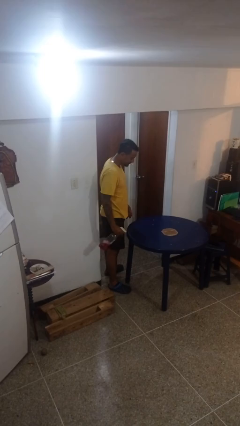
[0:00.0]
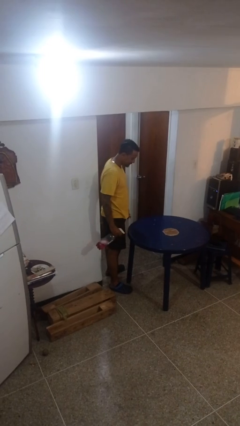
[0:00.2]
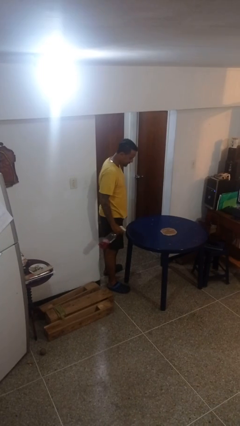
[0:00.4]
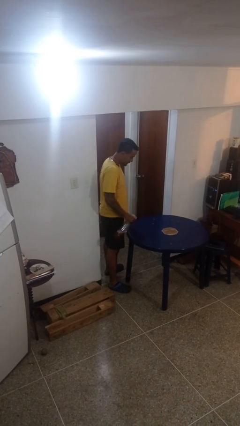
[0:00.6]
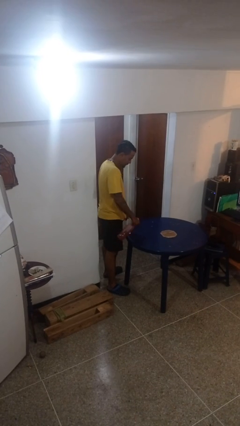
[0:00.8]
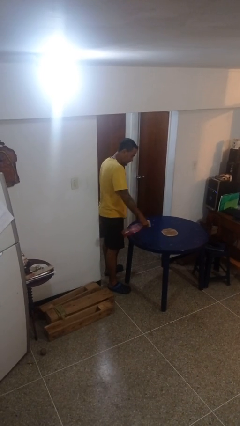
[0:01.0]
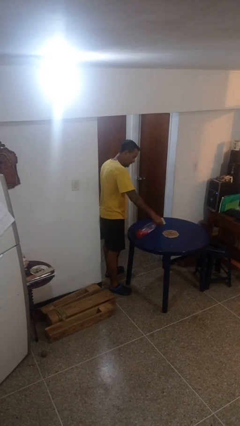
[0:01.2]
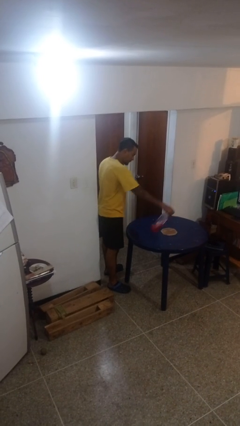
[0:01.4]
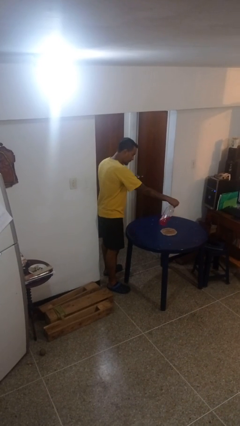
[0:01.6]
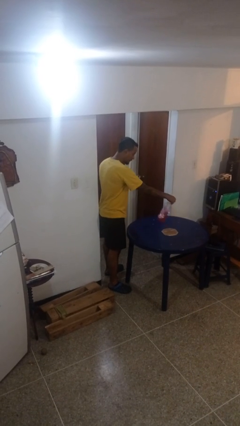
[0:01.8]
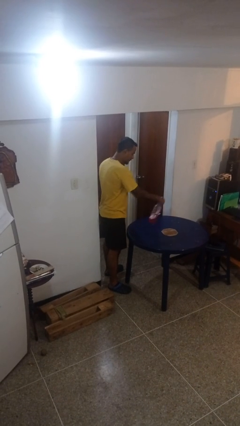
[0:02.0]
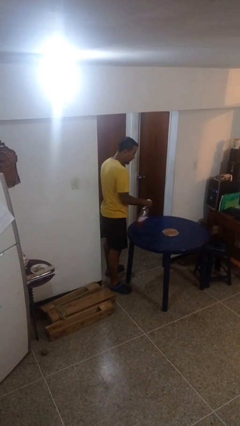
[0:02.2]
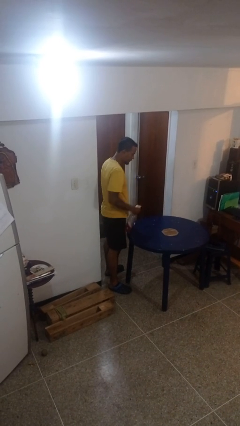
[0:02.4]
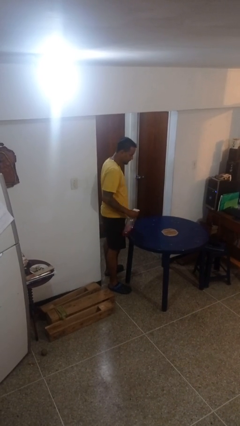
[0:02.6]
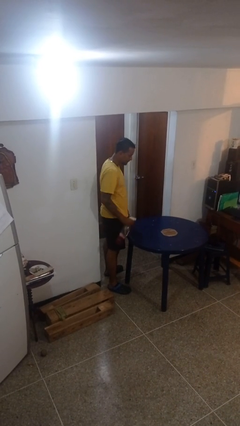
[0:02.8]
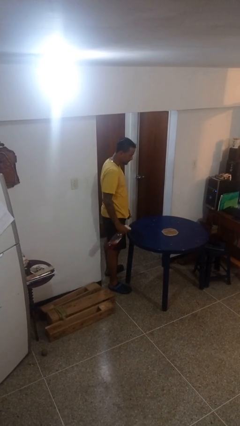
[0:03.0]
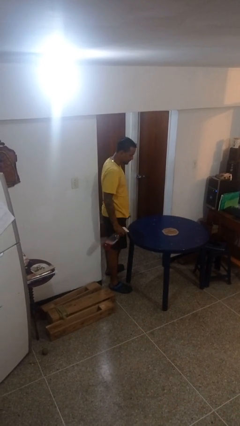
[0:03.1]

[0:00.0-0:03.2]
person sprays from bottle

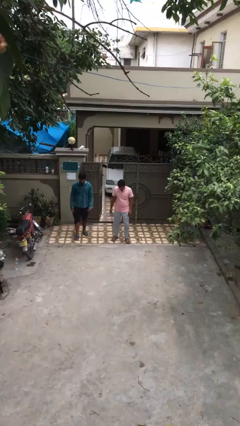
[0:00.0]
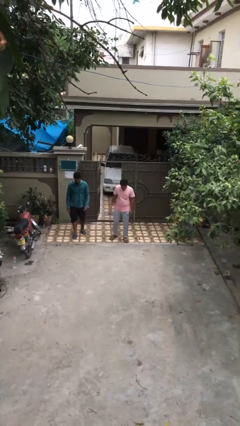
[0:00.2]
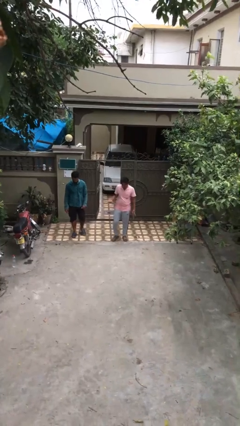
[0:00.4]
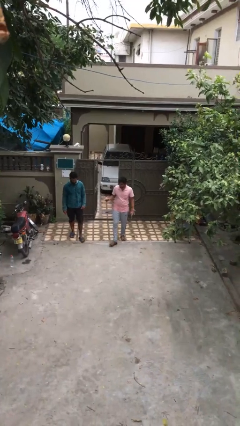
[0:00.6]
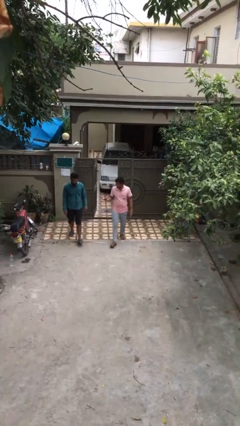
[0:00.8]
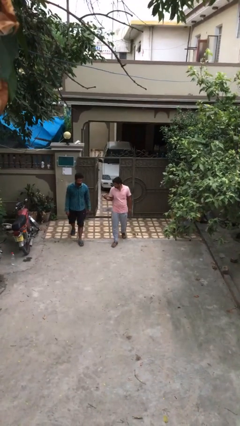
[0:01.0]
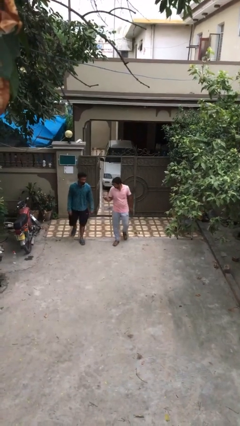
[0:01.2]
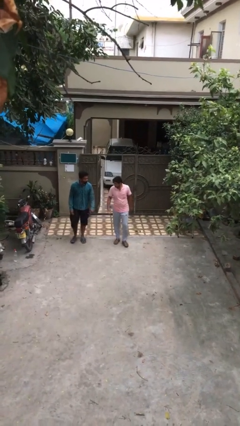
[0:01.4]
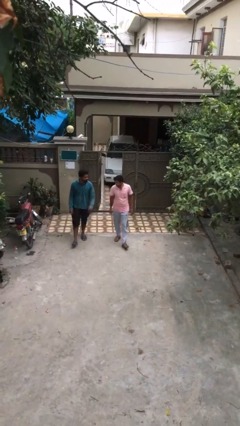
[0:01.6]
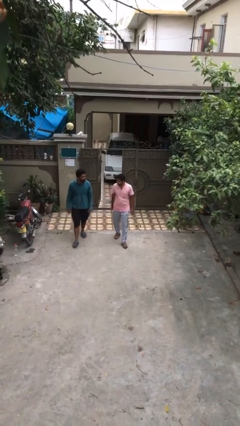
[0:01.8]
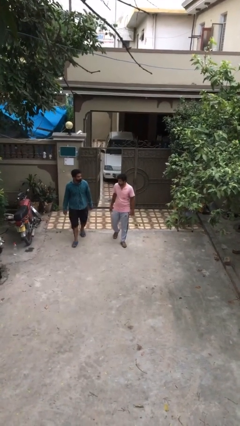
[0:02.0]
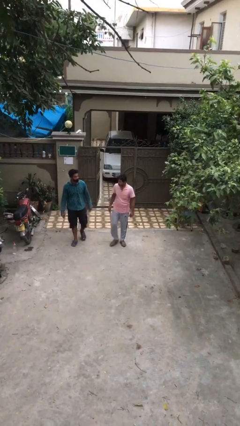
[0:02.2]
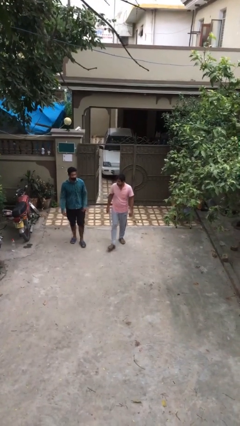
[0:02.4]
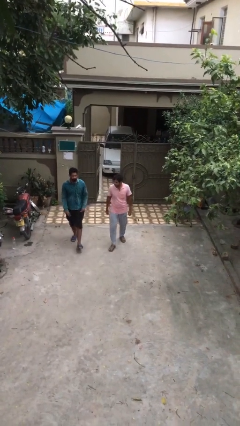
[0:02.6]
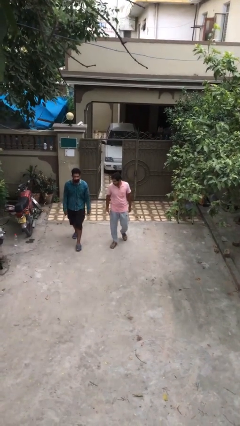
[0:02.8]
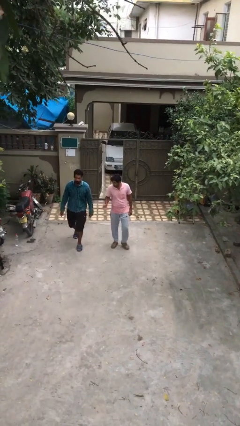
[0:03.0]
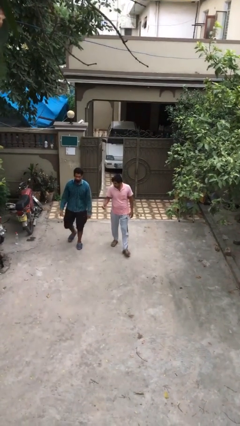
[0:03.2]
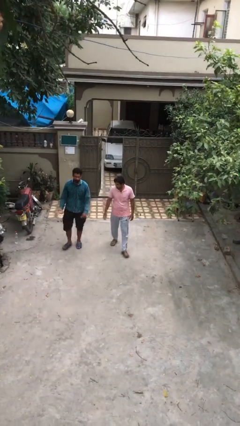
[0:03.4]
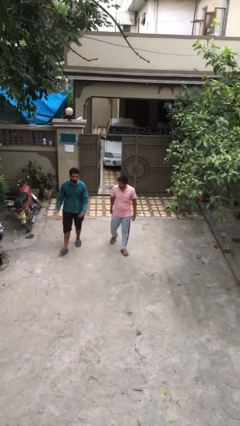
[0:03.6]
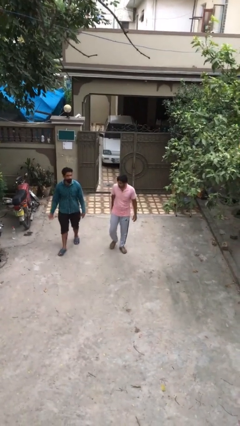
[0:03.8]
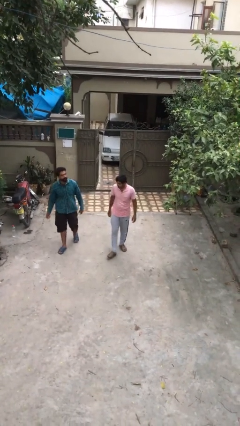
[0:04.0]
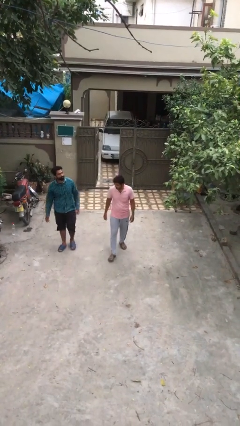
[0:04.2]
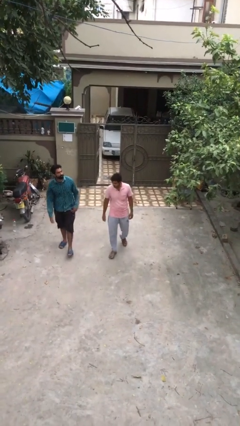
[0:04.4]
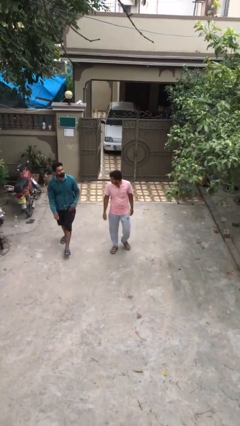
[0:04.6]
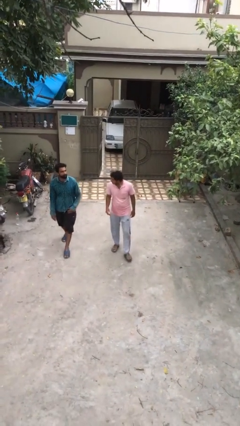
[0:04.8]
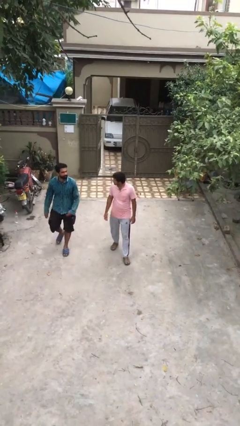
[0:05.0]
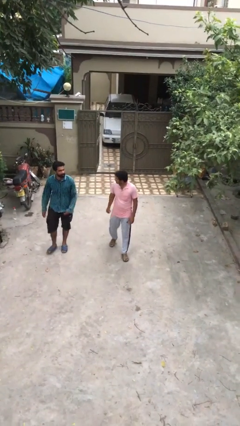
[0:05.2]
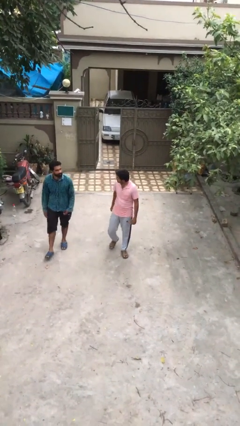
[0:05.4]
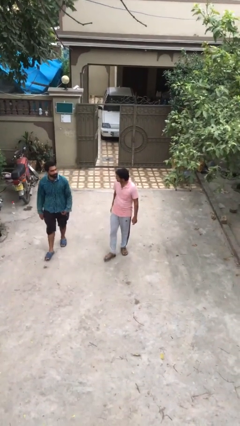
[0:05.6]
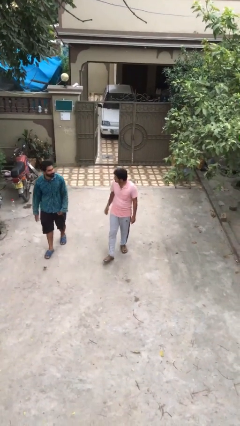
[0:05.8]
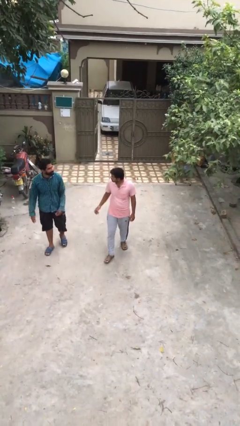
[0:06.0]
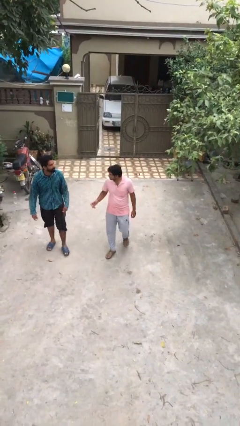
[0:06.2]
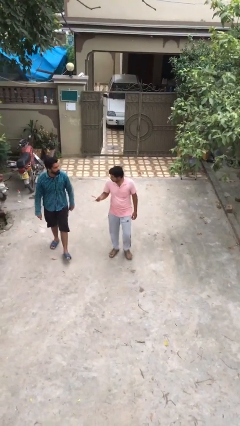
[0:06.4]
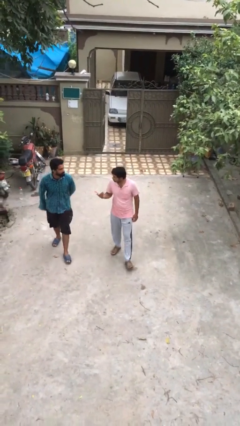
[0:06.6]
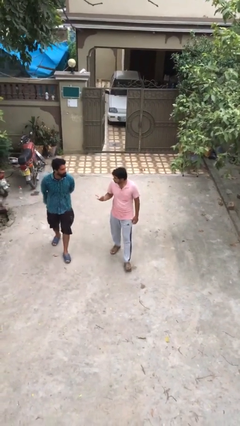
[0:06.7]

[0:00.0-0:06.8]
person talks to person

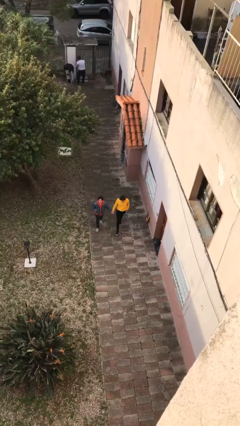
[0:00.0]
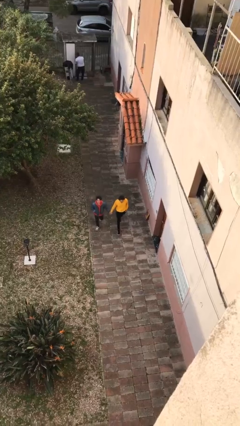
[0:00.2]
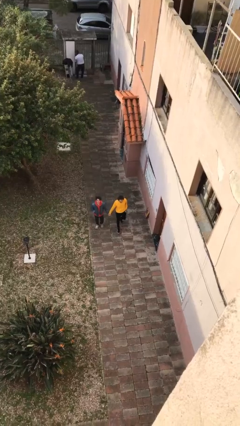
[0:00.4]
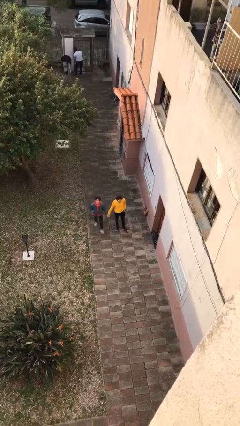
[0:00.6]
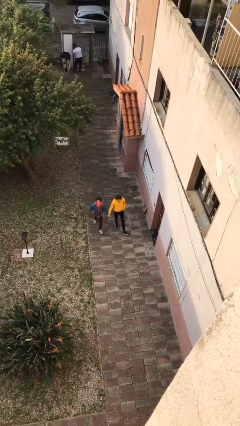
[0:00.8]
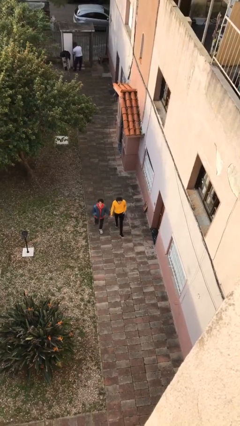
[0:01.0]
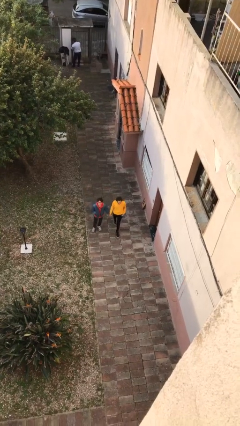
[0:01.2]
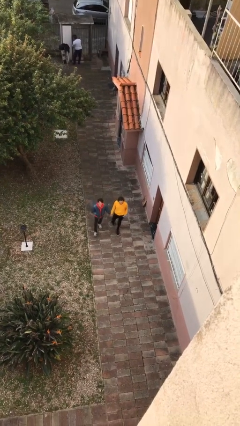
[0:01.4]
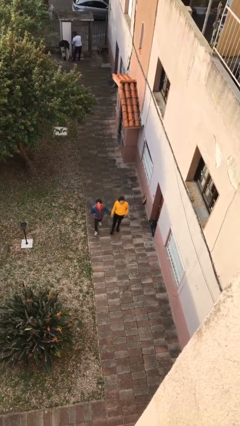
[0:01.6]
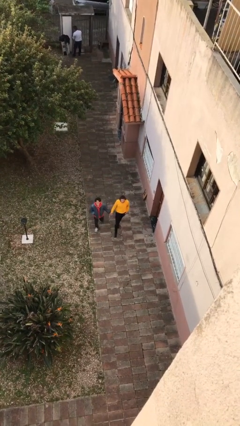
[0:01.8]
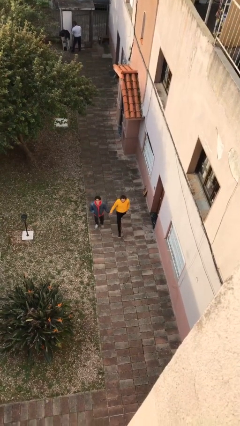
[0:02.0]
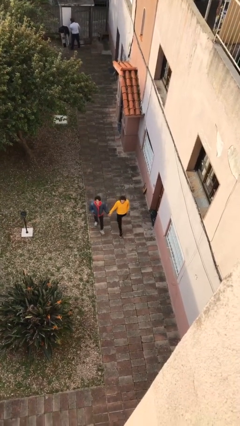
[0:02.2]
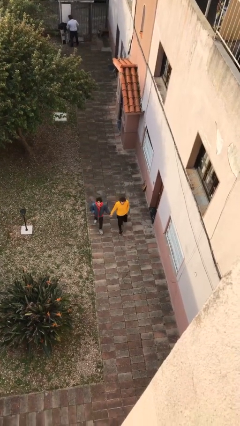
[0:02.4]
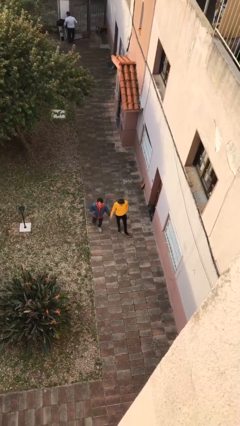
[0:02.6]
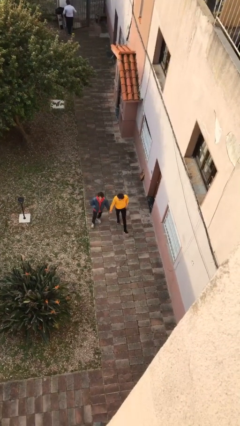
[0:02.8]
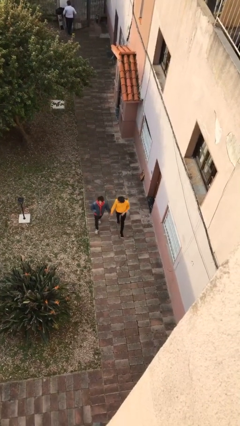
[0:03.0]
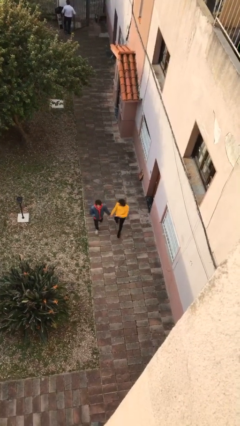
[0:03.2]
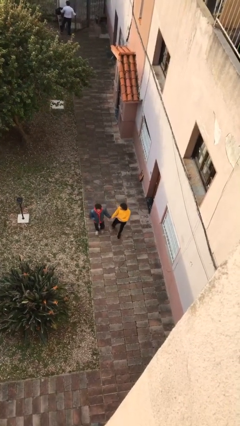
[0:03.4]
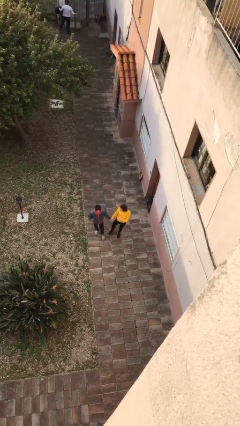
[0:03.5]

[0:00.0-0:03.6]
person holds hand

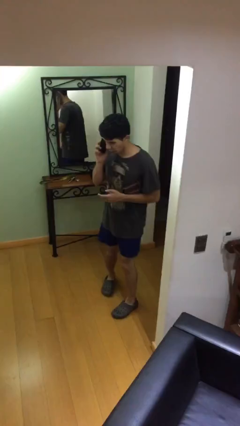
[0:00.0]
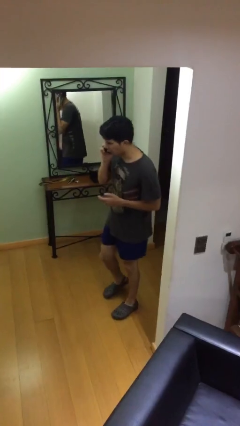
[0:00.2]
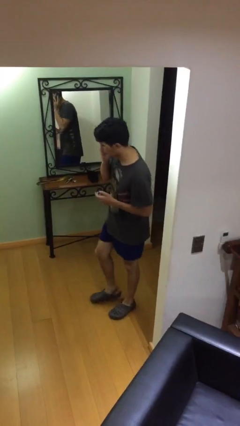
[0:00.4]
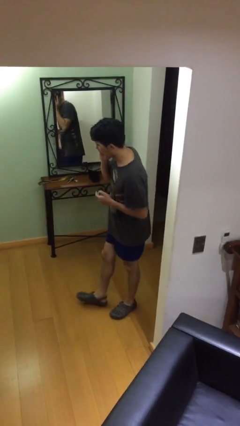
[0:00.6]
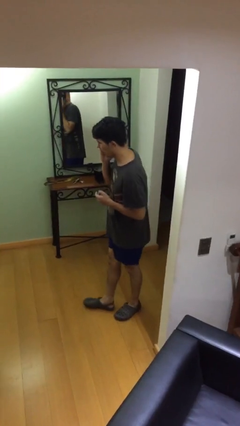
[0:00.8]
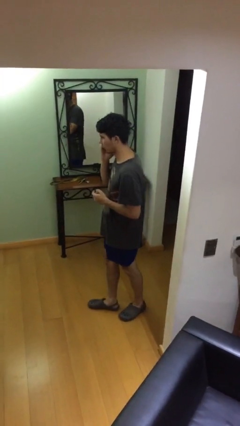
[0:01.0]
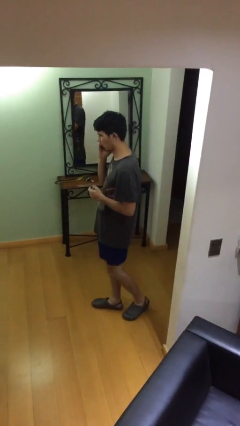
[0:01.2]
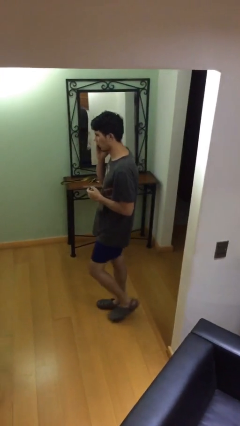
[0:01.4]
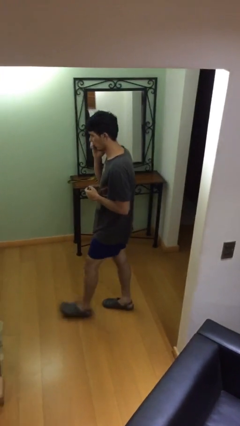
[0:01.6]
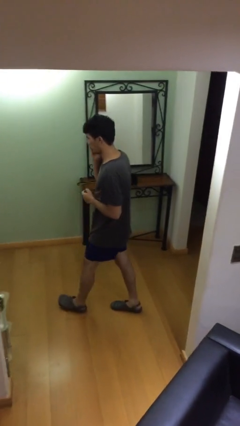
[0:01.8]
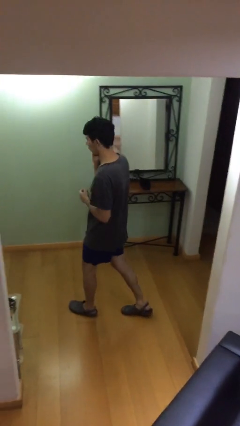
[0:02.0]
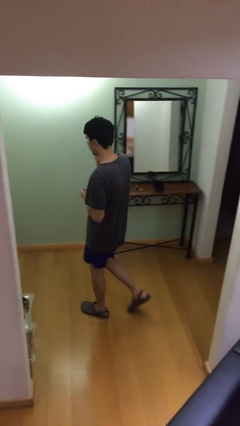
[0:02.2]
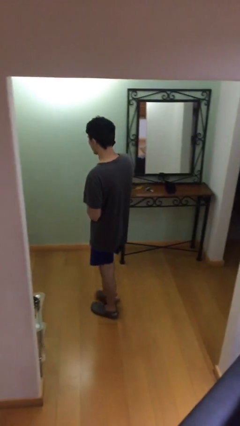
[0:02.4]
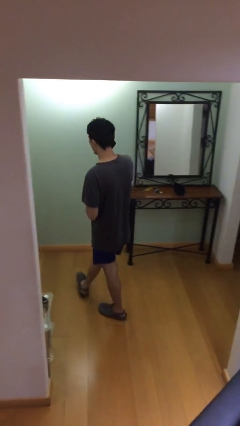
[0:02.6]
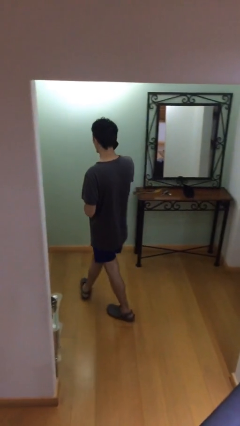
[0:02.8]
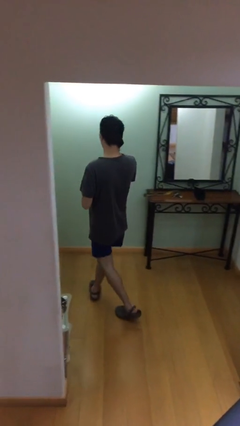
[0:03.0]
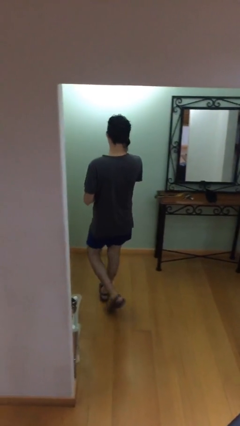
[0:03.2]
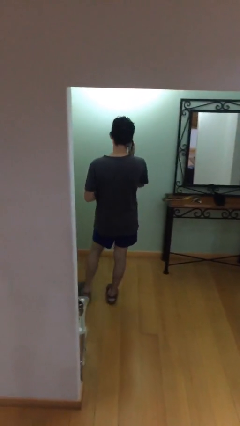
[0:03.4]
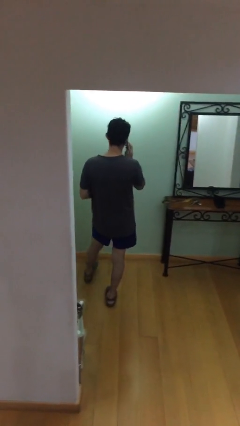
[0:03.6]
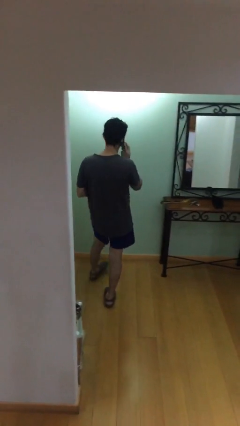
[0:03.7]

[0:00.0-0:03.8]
person talks on phone
